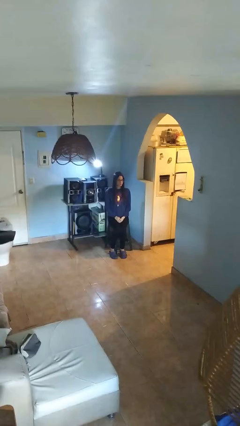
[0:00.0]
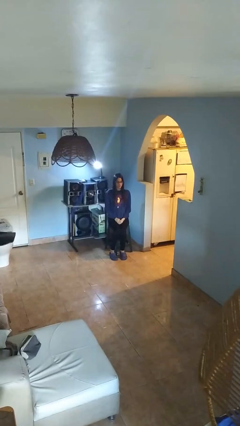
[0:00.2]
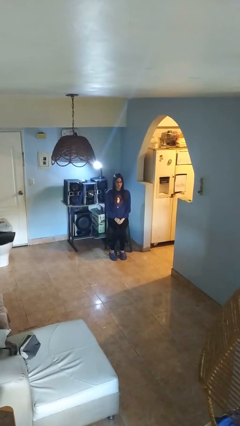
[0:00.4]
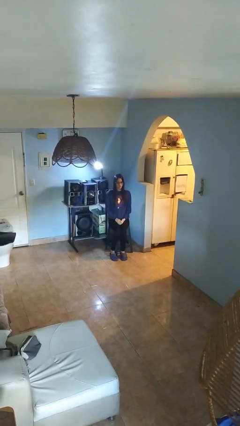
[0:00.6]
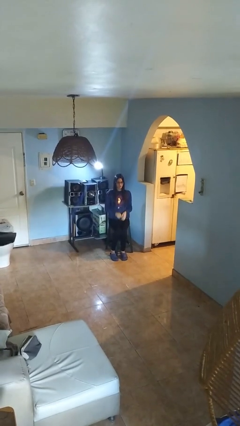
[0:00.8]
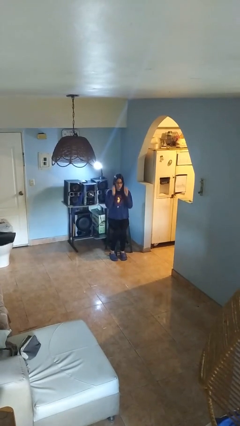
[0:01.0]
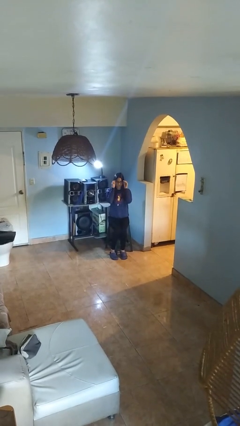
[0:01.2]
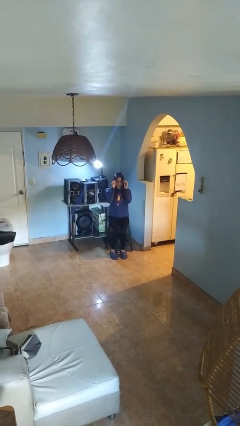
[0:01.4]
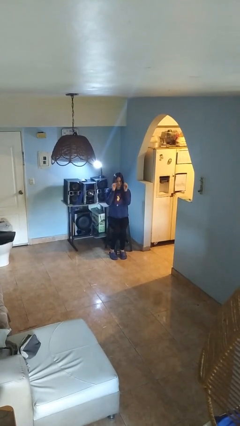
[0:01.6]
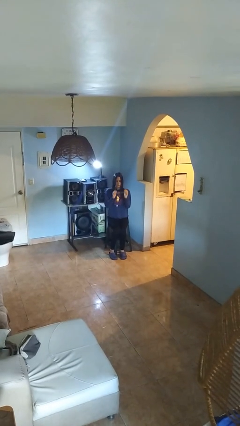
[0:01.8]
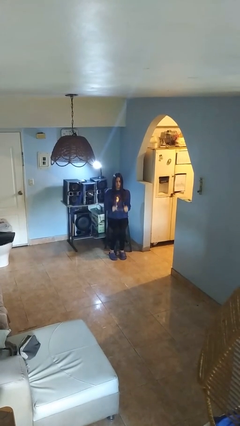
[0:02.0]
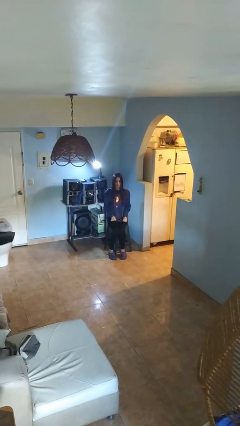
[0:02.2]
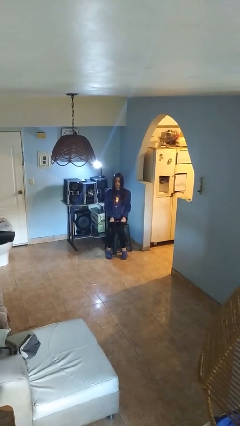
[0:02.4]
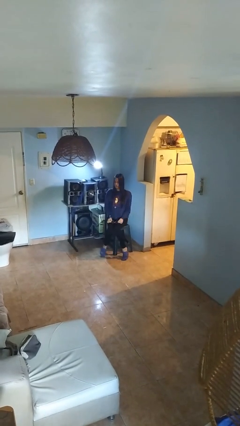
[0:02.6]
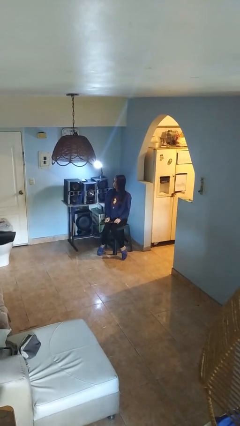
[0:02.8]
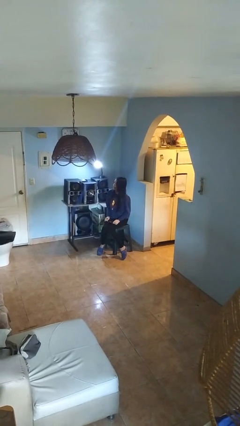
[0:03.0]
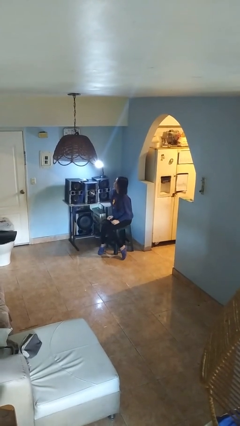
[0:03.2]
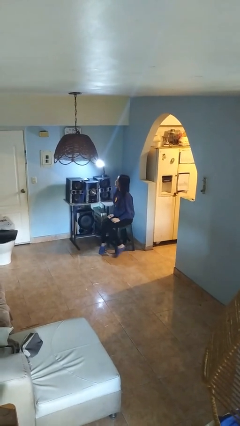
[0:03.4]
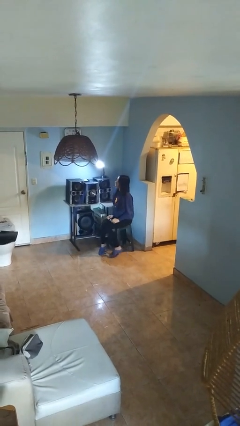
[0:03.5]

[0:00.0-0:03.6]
person takes off glasses

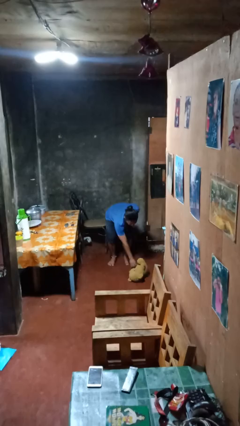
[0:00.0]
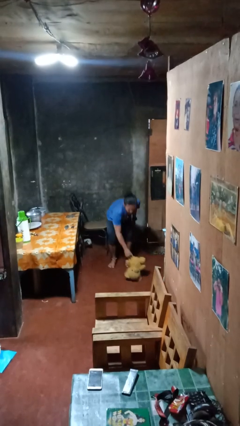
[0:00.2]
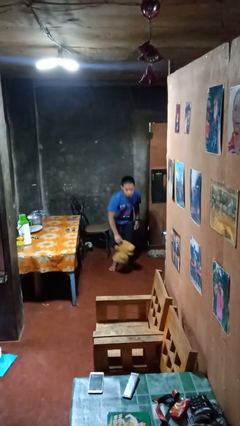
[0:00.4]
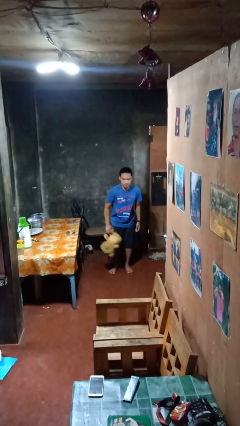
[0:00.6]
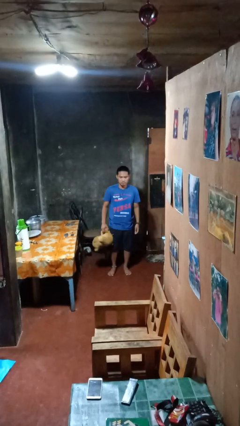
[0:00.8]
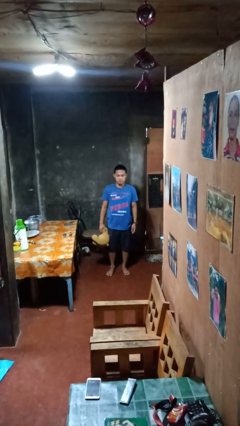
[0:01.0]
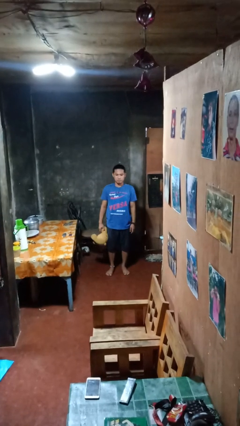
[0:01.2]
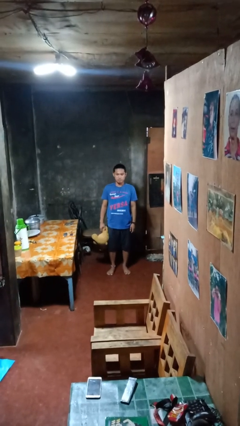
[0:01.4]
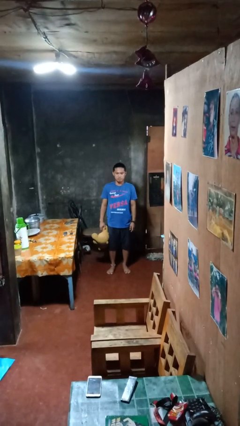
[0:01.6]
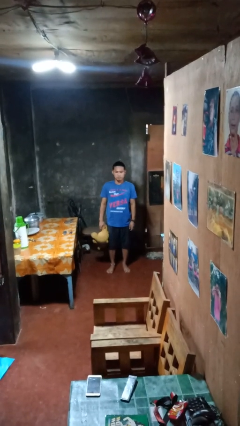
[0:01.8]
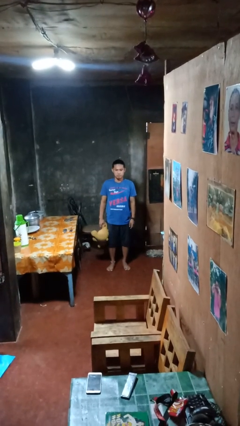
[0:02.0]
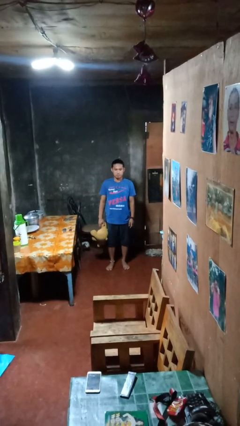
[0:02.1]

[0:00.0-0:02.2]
person picks up object from floor

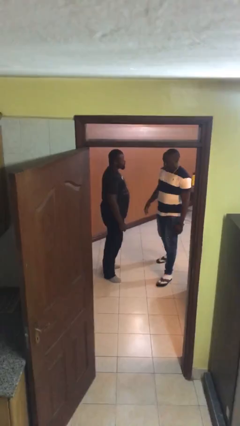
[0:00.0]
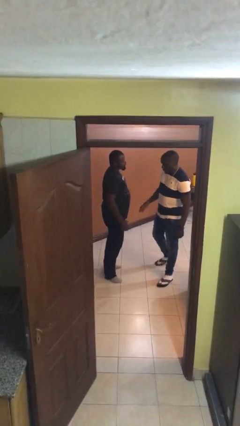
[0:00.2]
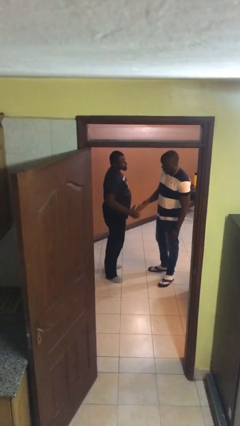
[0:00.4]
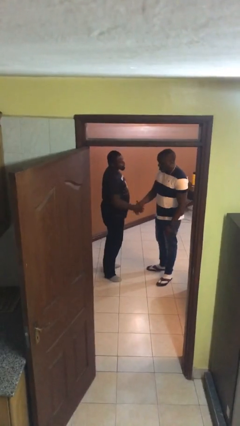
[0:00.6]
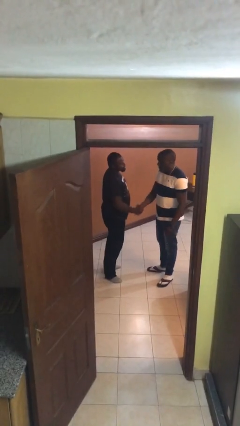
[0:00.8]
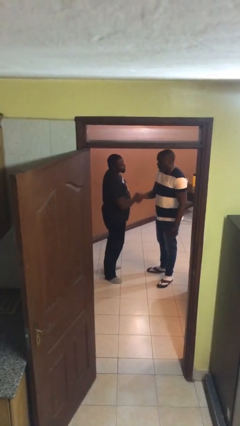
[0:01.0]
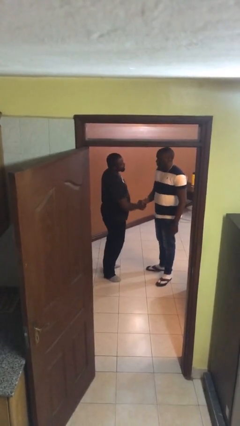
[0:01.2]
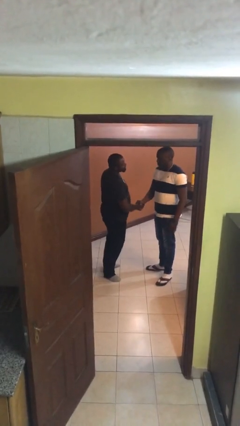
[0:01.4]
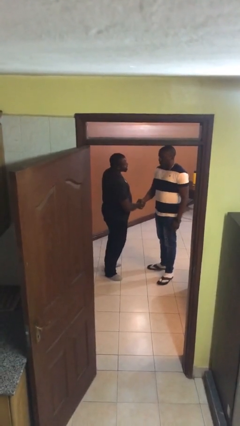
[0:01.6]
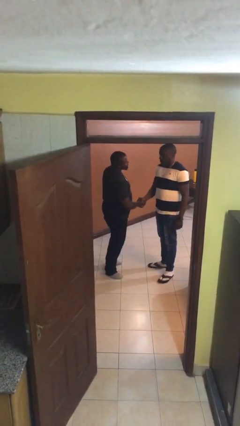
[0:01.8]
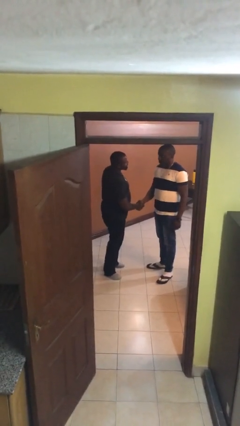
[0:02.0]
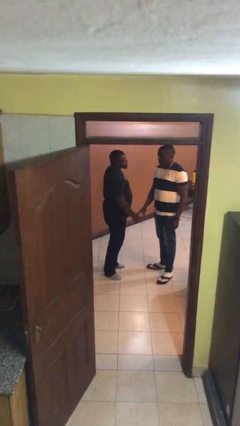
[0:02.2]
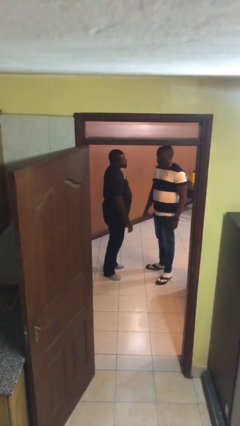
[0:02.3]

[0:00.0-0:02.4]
person shakes hand

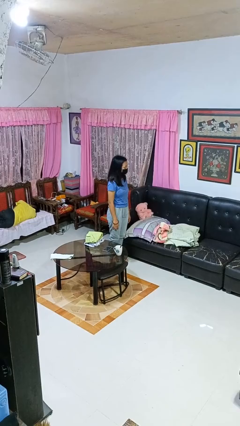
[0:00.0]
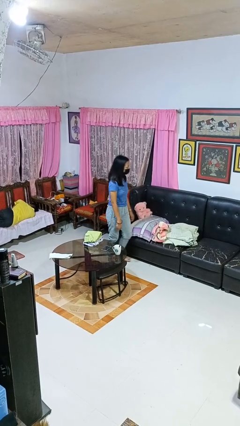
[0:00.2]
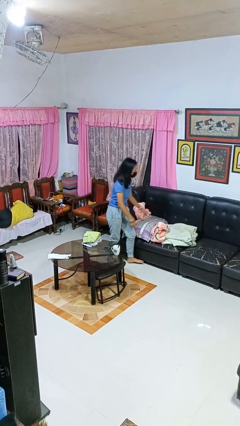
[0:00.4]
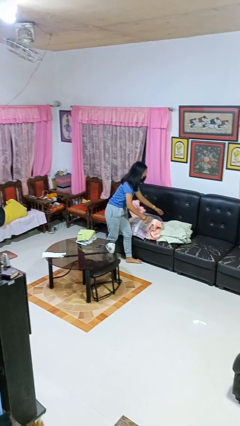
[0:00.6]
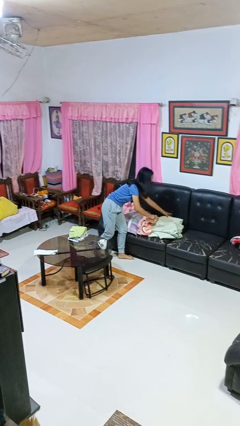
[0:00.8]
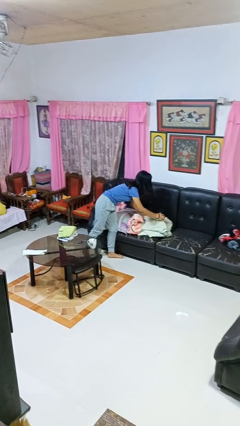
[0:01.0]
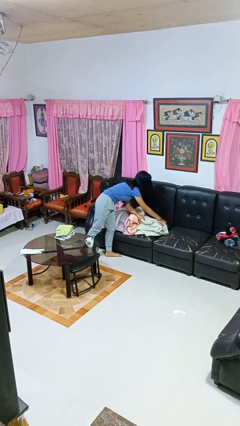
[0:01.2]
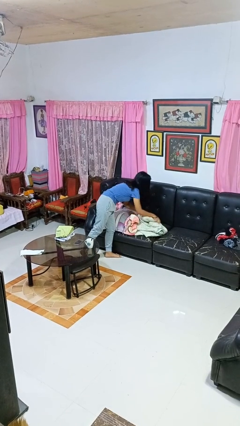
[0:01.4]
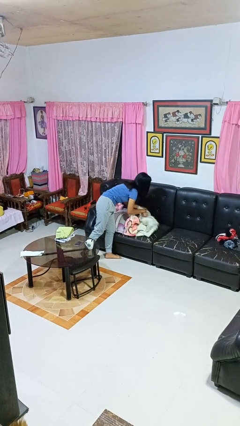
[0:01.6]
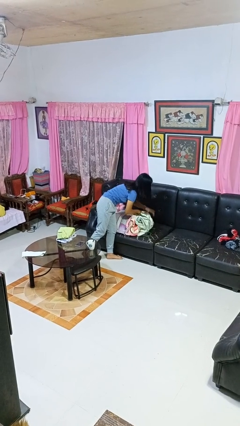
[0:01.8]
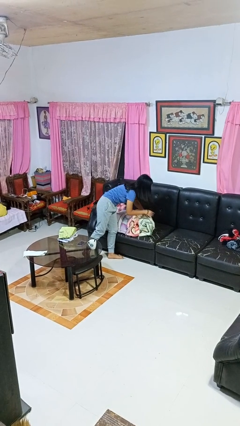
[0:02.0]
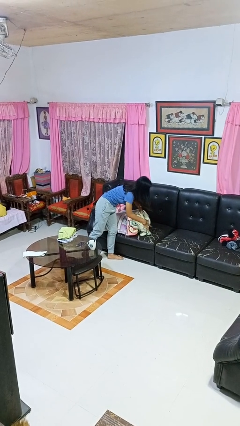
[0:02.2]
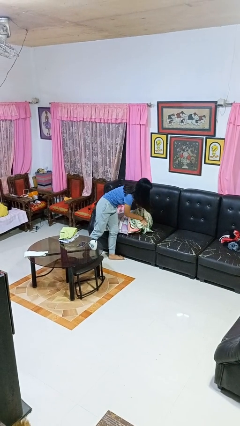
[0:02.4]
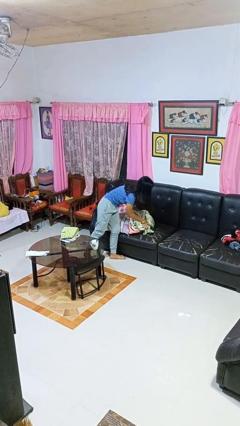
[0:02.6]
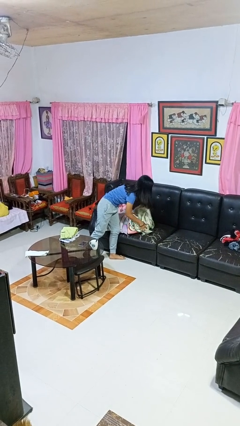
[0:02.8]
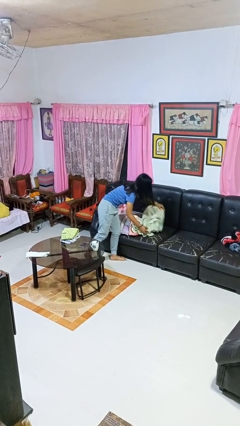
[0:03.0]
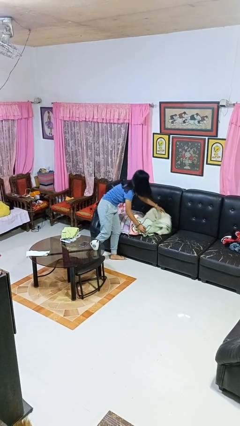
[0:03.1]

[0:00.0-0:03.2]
person searches in couch

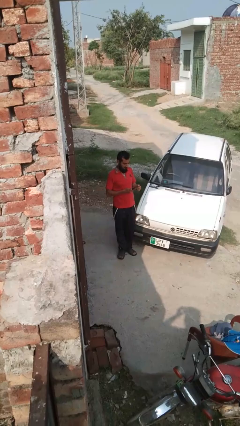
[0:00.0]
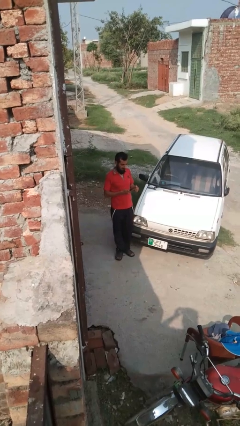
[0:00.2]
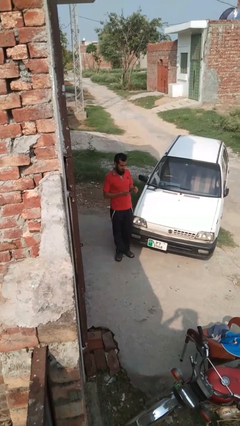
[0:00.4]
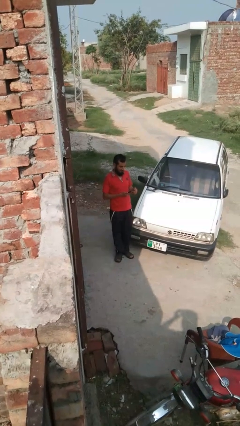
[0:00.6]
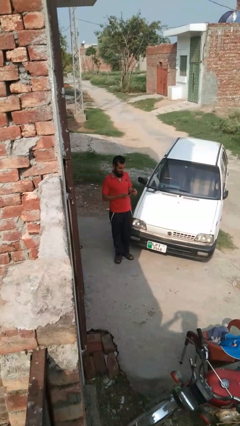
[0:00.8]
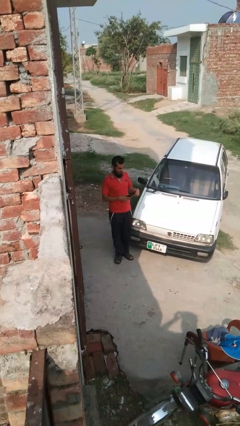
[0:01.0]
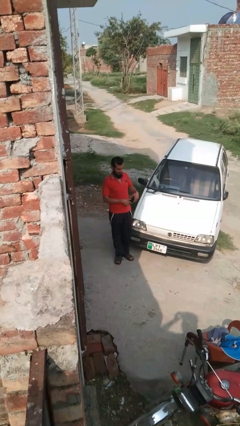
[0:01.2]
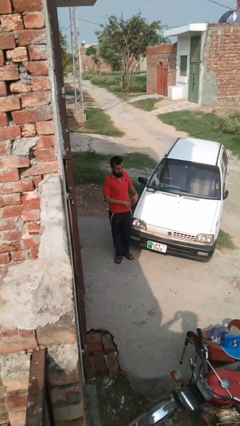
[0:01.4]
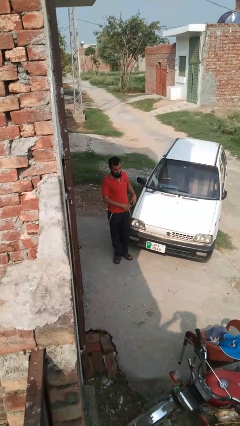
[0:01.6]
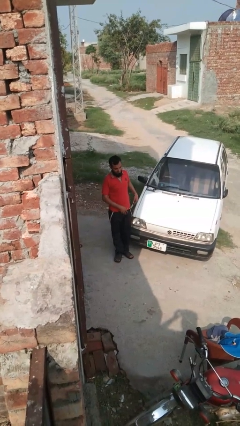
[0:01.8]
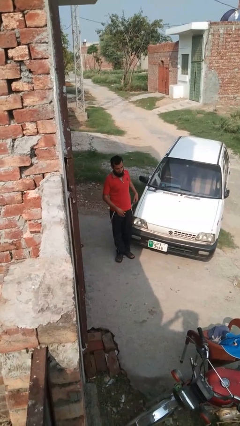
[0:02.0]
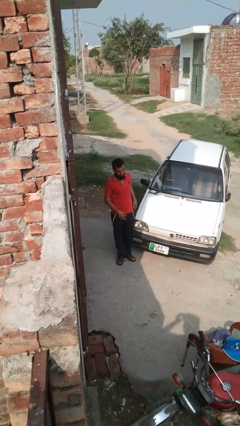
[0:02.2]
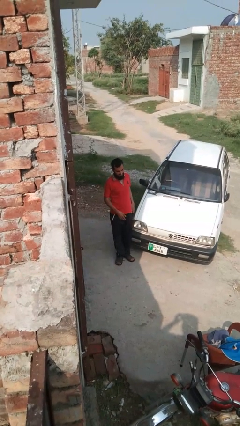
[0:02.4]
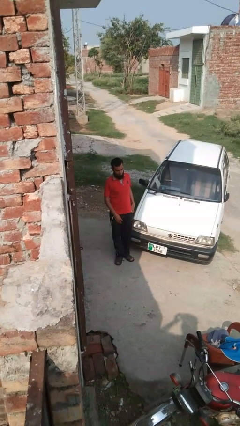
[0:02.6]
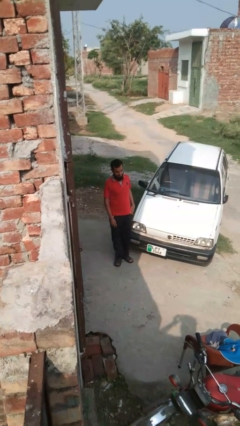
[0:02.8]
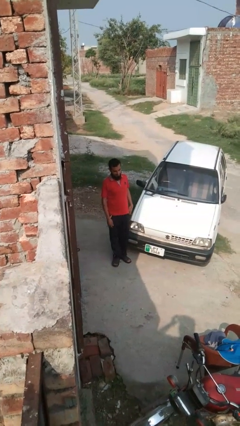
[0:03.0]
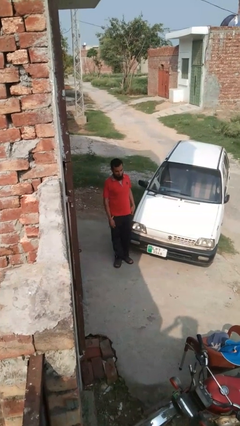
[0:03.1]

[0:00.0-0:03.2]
person puts phone into pocket

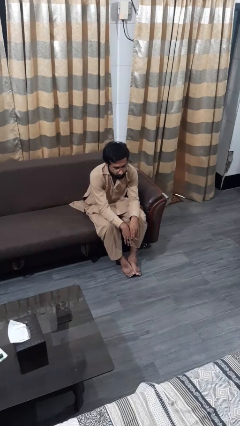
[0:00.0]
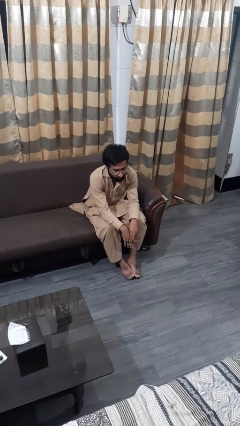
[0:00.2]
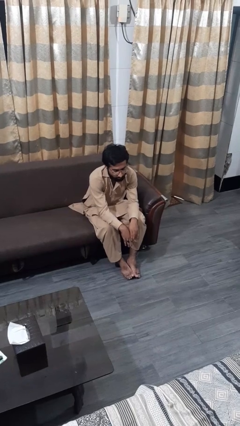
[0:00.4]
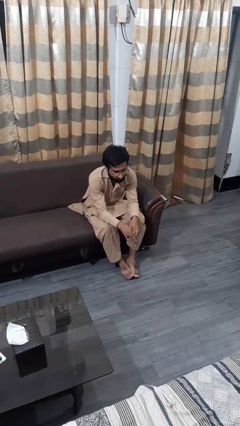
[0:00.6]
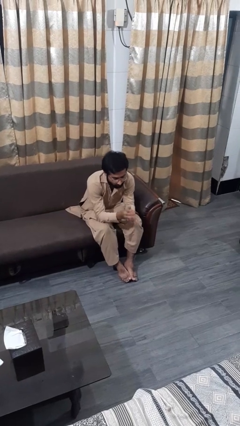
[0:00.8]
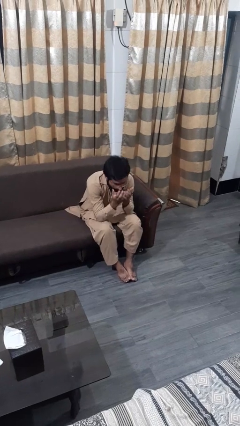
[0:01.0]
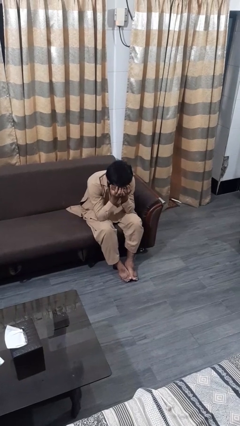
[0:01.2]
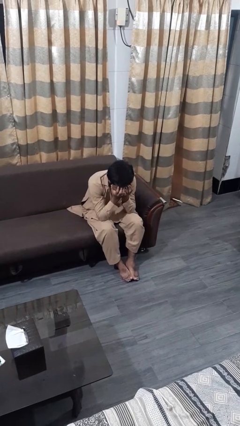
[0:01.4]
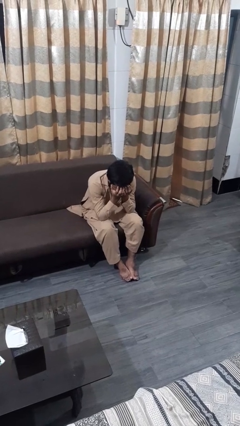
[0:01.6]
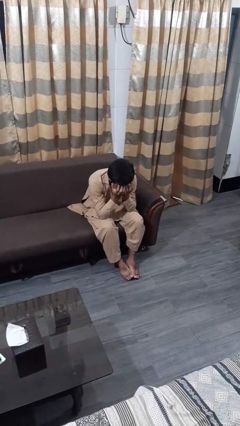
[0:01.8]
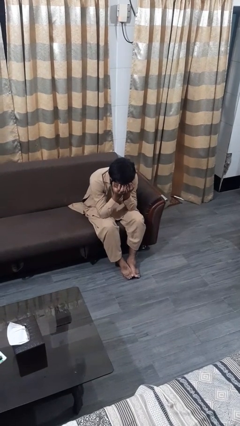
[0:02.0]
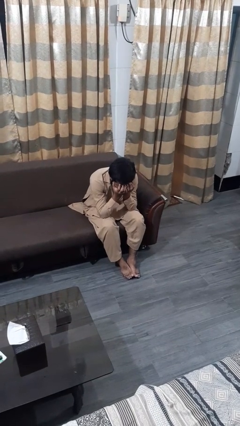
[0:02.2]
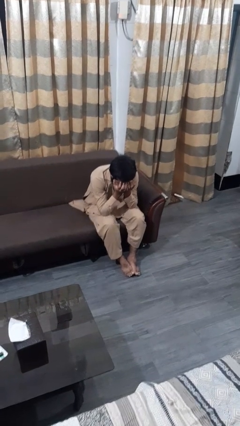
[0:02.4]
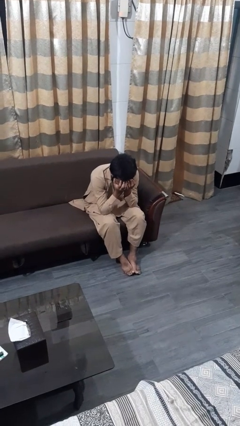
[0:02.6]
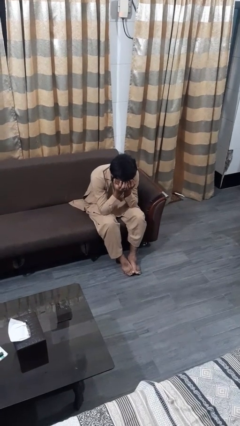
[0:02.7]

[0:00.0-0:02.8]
person covers face with hands
